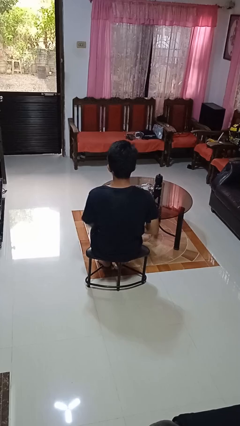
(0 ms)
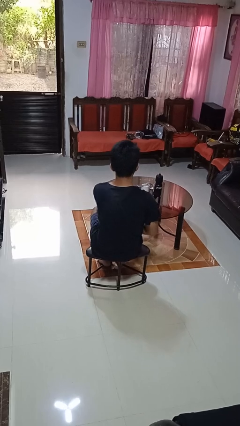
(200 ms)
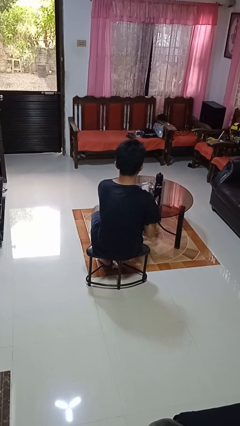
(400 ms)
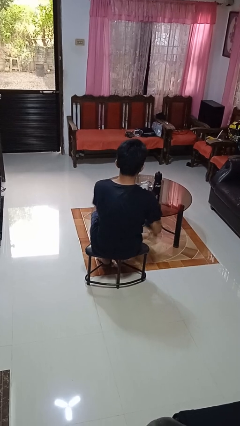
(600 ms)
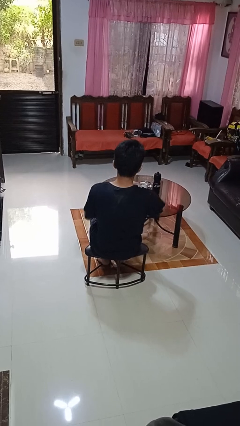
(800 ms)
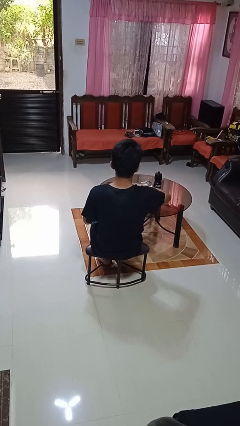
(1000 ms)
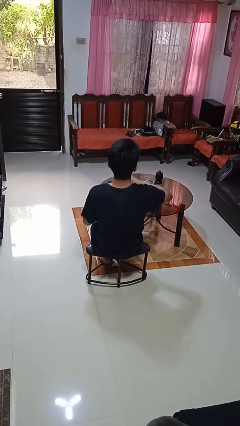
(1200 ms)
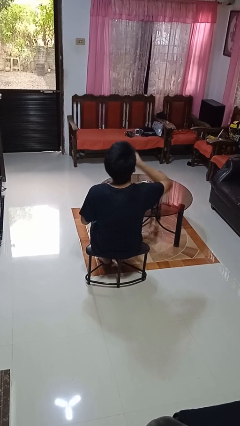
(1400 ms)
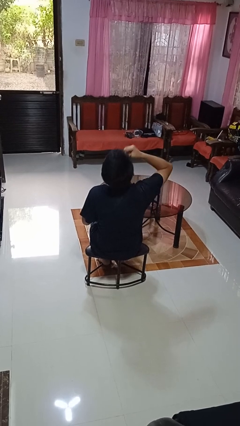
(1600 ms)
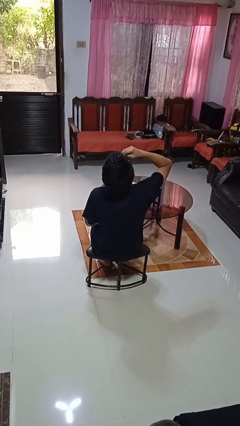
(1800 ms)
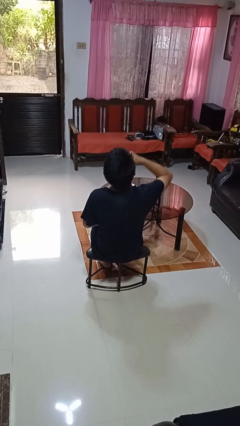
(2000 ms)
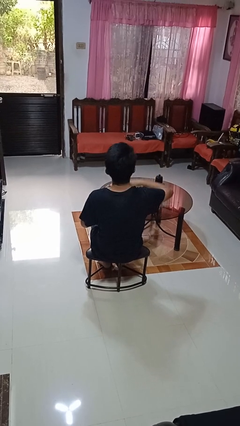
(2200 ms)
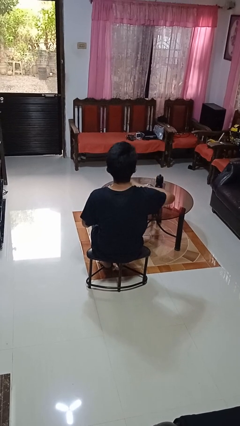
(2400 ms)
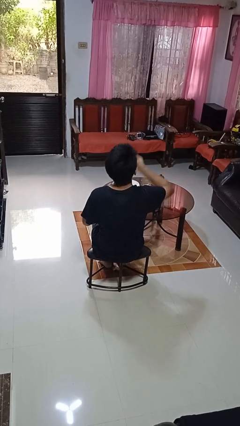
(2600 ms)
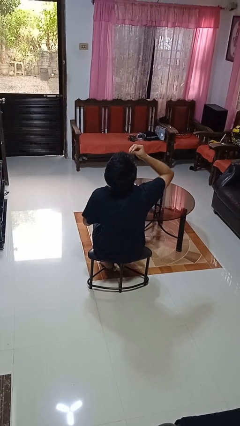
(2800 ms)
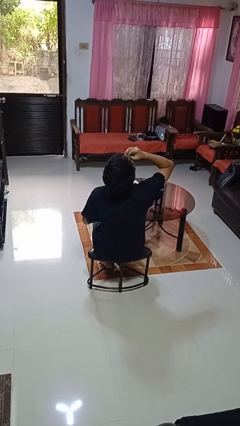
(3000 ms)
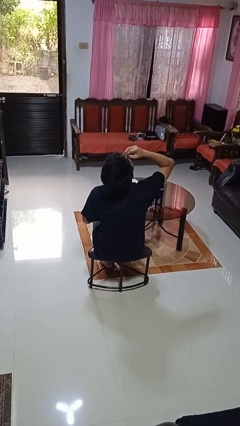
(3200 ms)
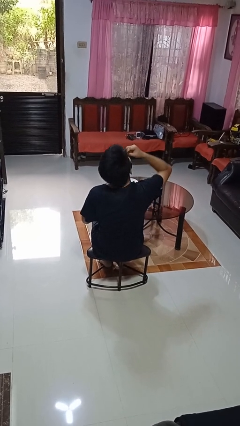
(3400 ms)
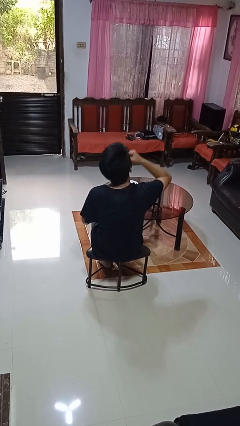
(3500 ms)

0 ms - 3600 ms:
person eats with hands

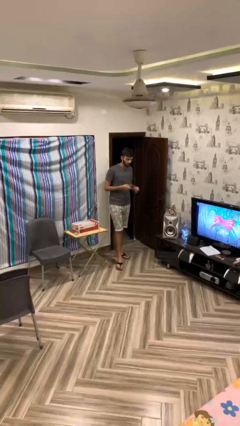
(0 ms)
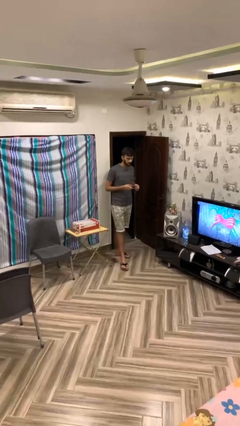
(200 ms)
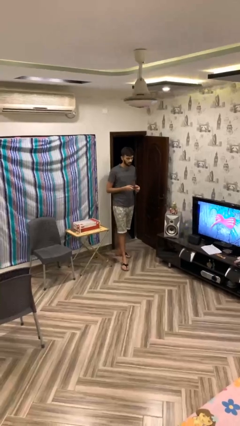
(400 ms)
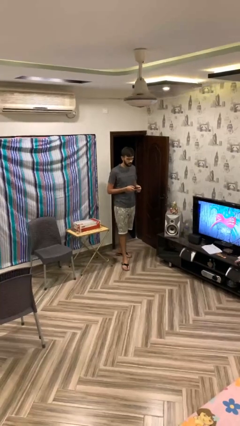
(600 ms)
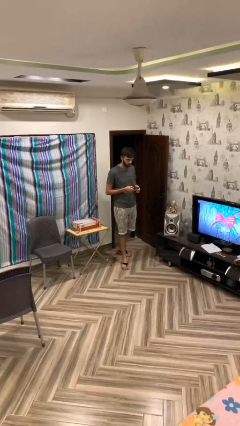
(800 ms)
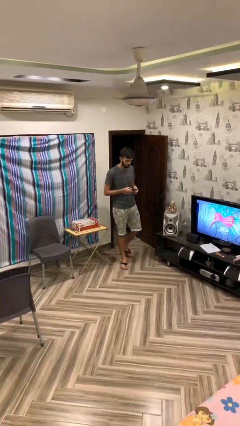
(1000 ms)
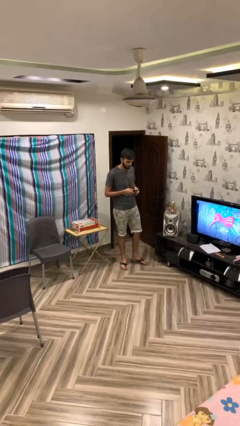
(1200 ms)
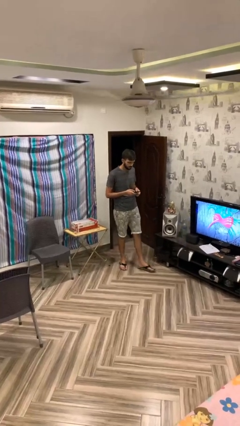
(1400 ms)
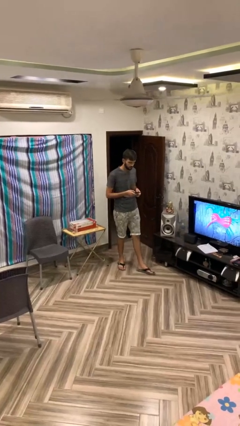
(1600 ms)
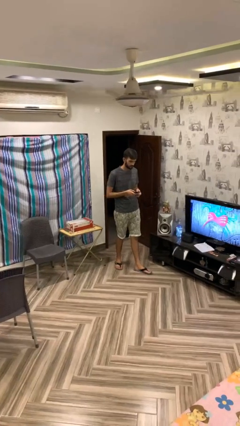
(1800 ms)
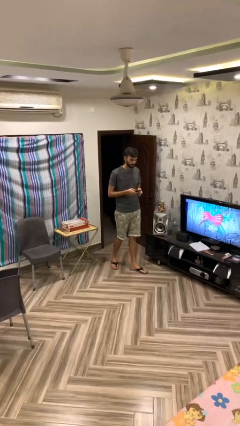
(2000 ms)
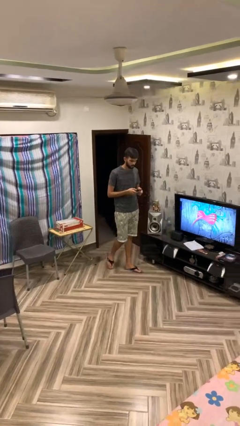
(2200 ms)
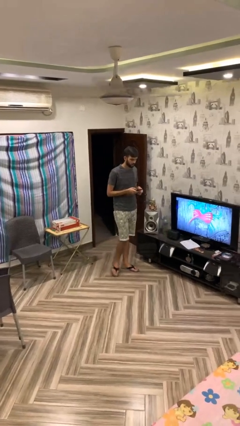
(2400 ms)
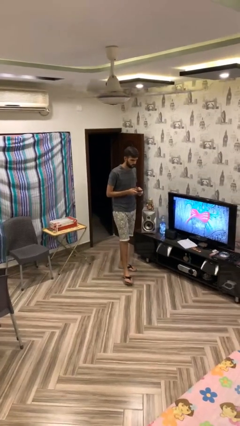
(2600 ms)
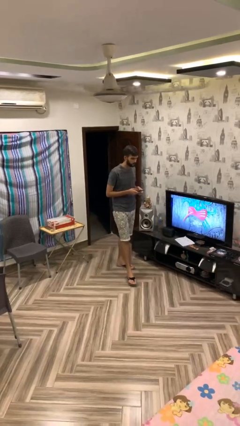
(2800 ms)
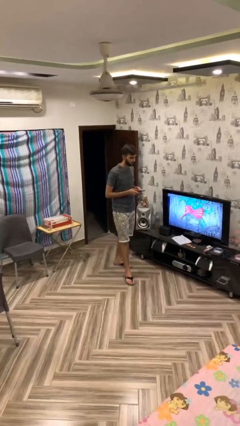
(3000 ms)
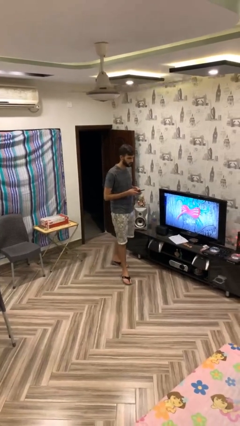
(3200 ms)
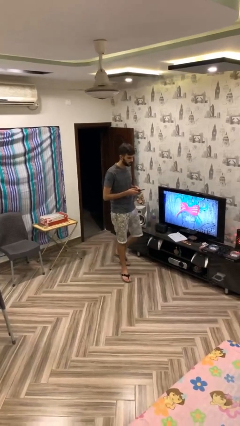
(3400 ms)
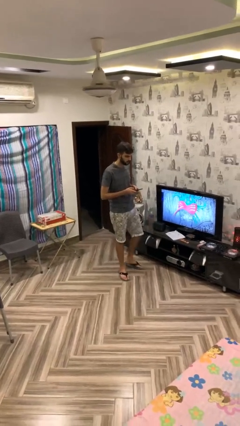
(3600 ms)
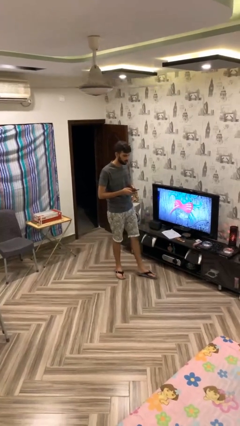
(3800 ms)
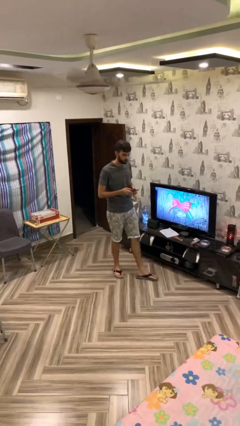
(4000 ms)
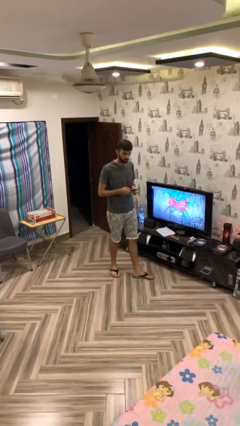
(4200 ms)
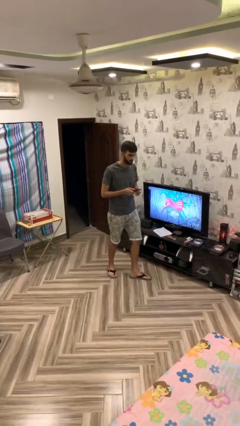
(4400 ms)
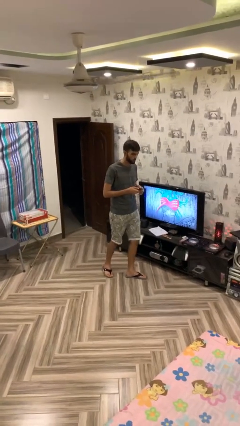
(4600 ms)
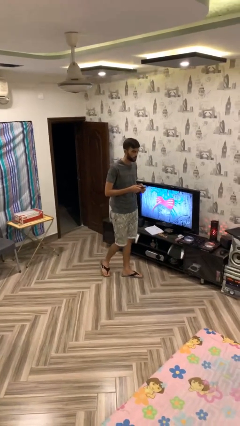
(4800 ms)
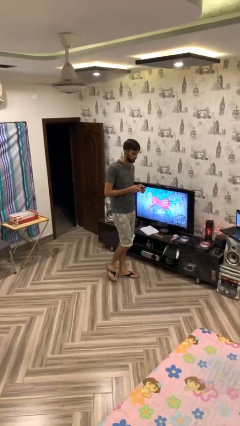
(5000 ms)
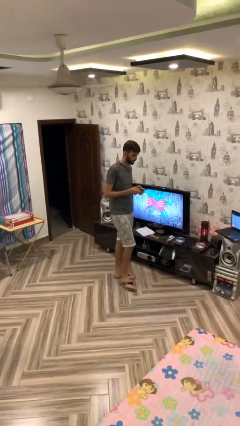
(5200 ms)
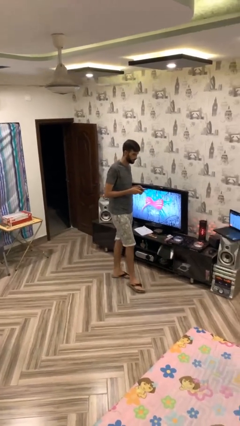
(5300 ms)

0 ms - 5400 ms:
person texts on phone

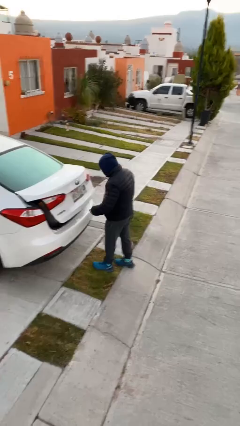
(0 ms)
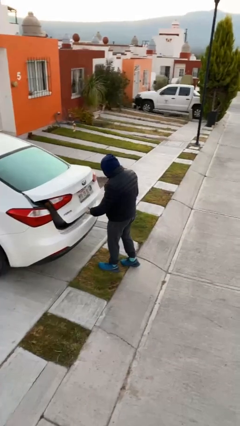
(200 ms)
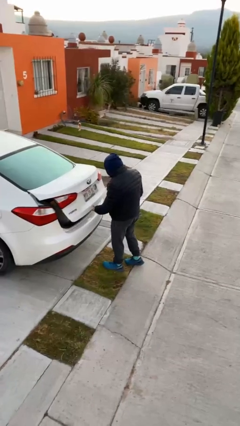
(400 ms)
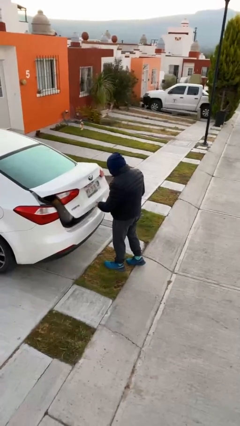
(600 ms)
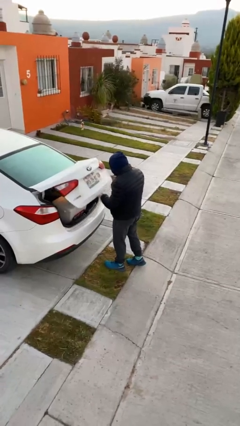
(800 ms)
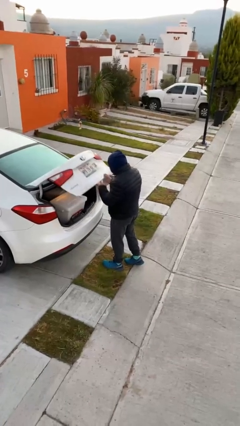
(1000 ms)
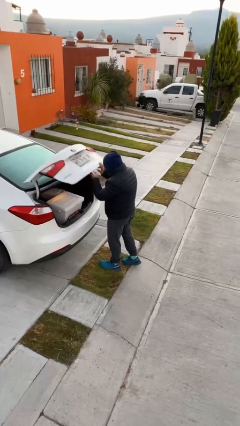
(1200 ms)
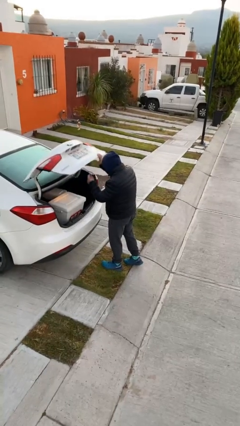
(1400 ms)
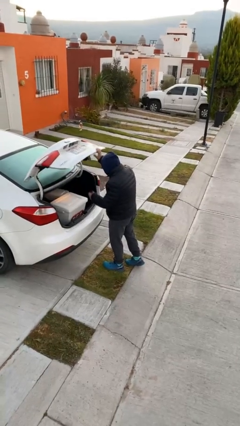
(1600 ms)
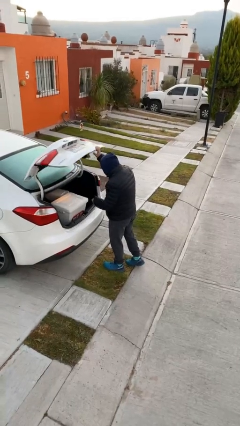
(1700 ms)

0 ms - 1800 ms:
person opens car trunk

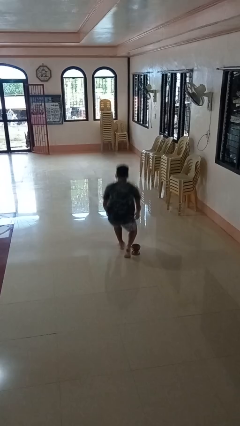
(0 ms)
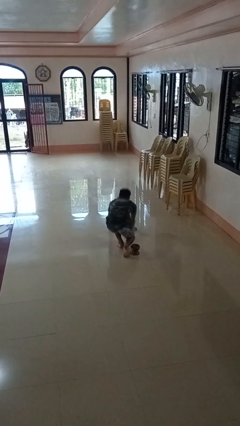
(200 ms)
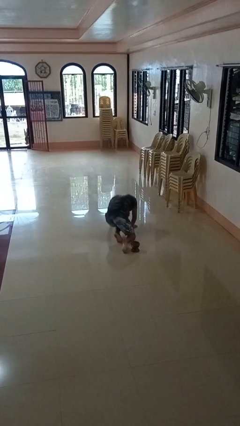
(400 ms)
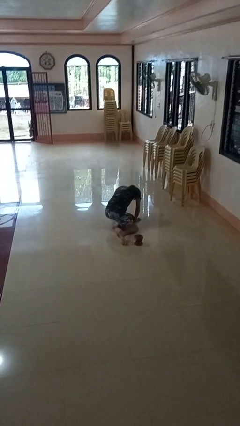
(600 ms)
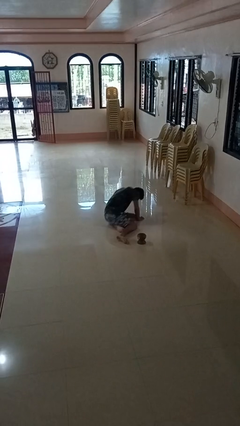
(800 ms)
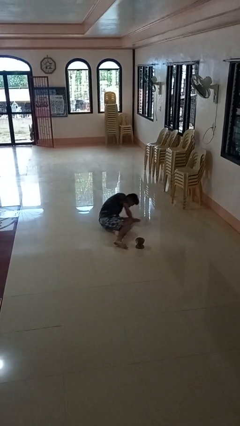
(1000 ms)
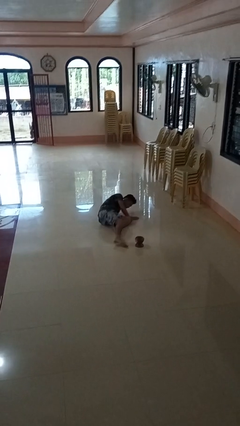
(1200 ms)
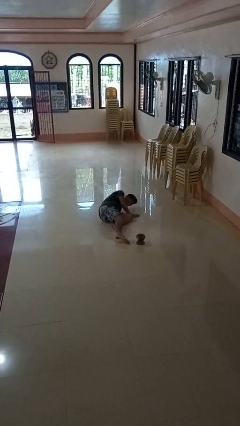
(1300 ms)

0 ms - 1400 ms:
person trips on object on floor

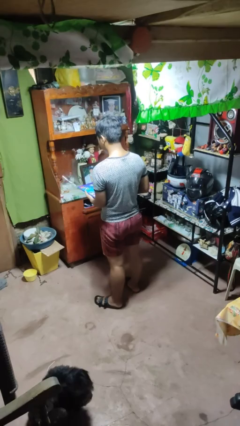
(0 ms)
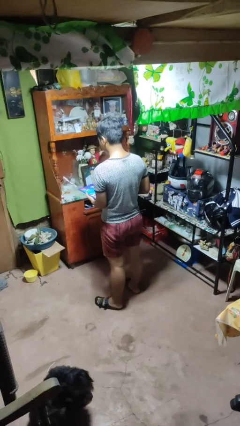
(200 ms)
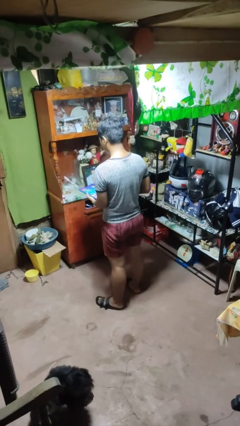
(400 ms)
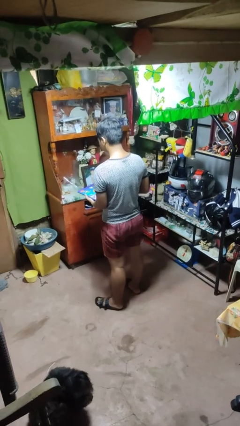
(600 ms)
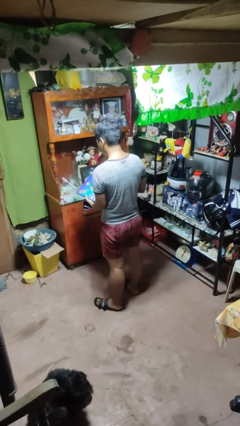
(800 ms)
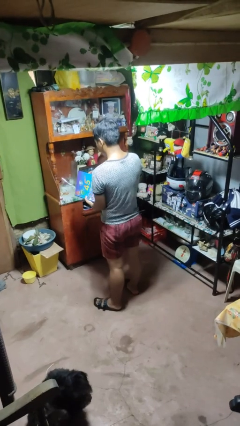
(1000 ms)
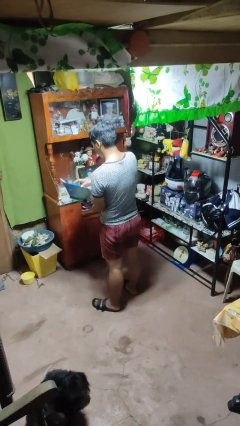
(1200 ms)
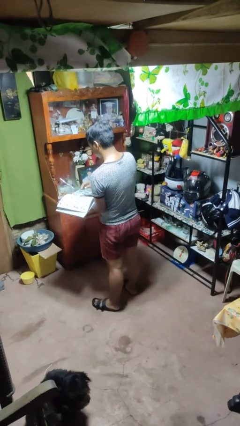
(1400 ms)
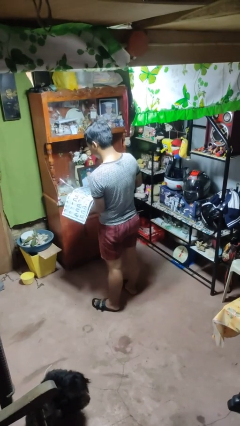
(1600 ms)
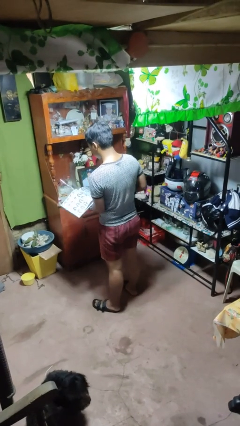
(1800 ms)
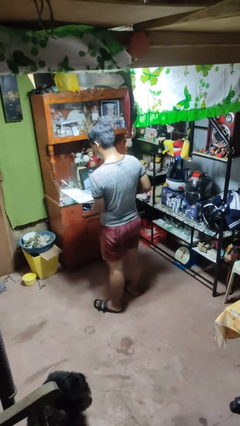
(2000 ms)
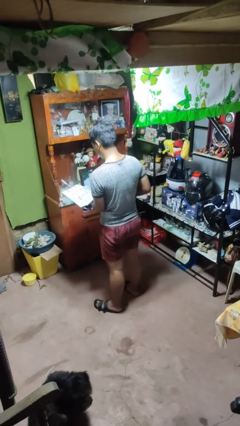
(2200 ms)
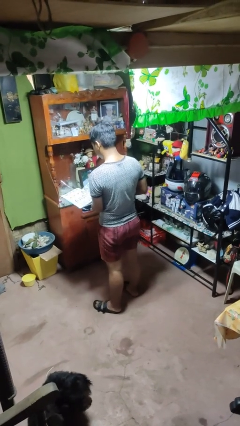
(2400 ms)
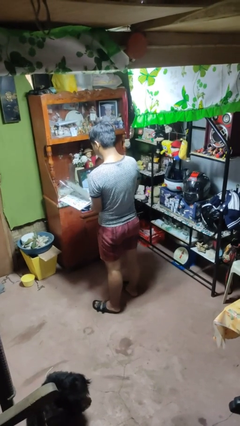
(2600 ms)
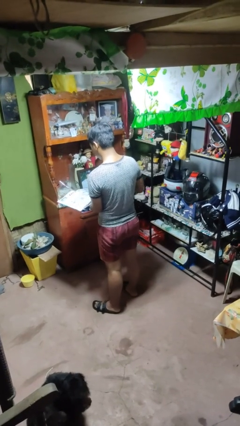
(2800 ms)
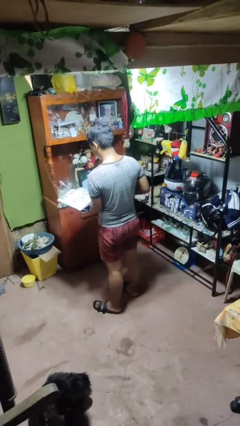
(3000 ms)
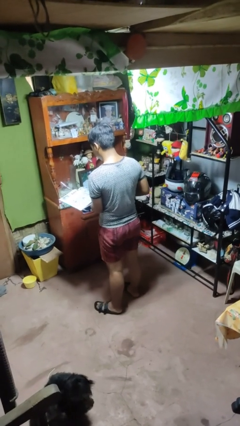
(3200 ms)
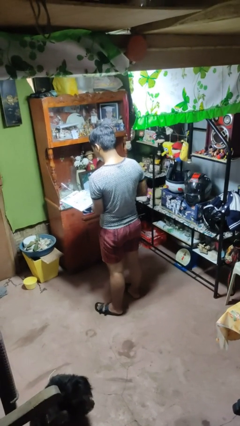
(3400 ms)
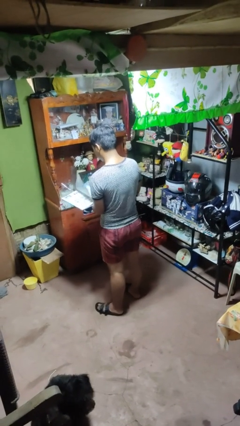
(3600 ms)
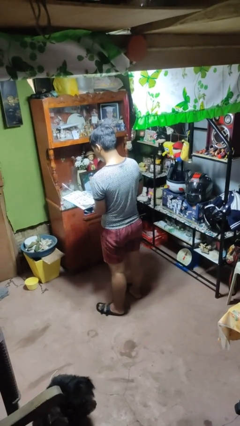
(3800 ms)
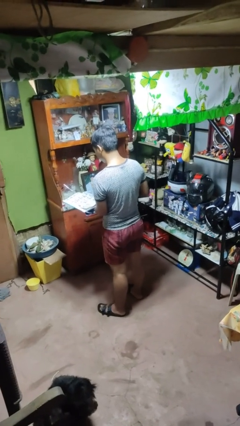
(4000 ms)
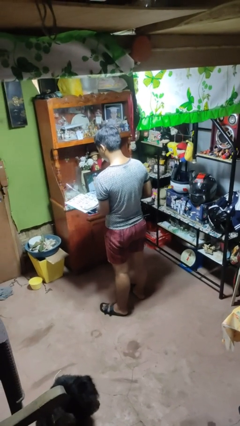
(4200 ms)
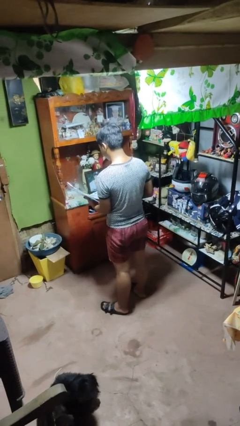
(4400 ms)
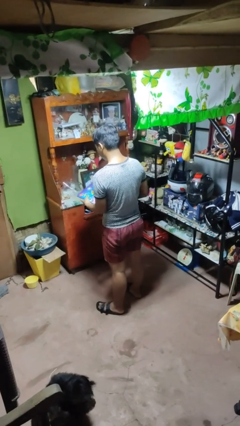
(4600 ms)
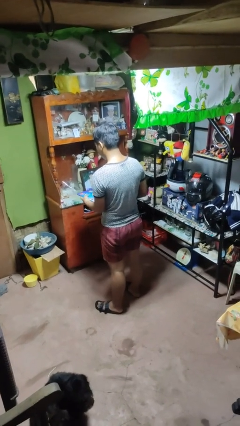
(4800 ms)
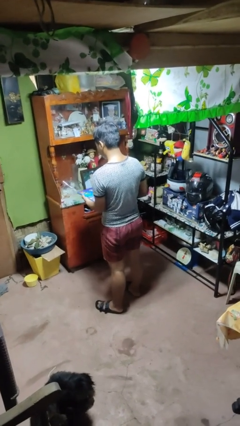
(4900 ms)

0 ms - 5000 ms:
person reads magazine

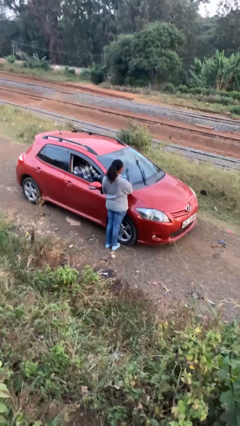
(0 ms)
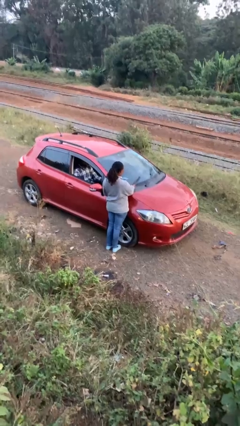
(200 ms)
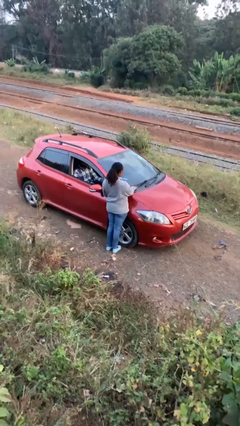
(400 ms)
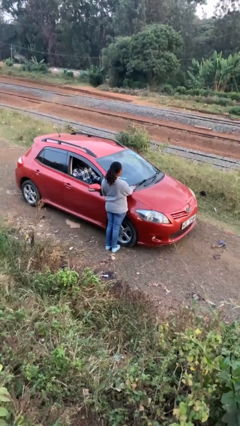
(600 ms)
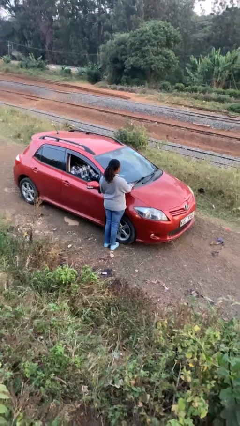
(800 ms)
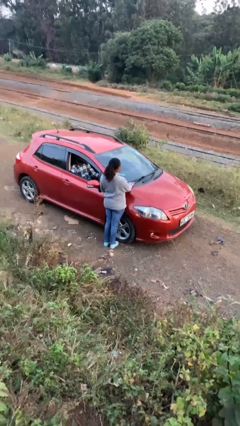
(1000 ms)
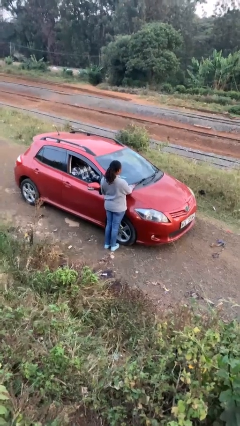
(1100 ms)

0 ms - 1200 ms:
person flips down car wipers
